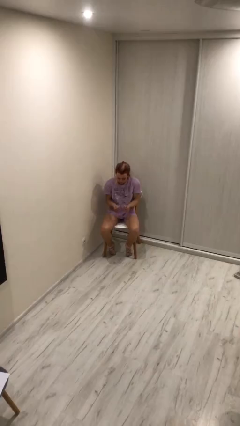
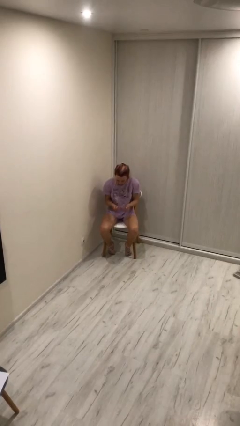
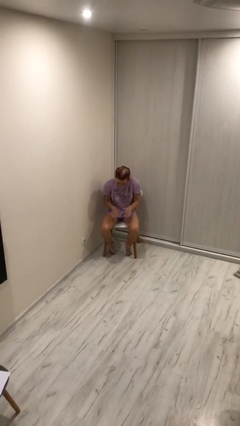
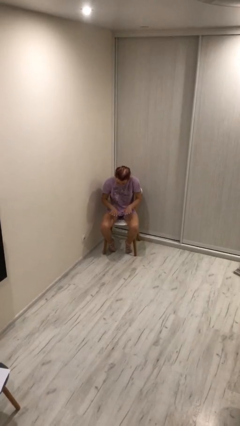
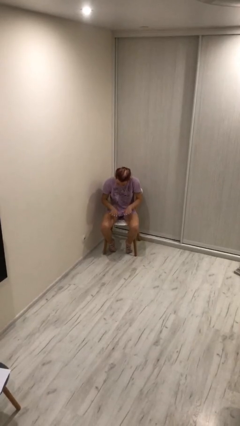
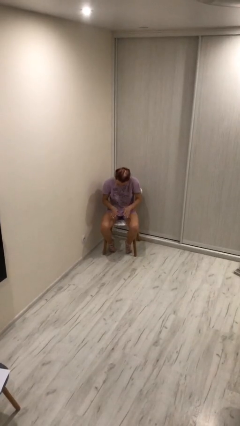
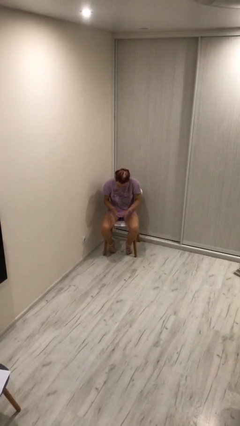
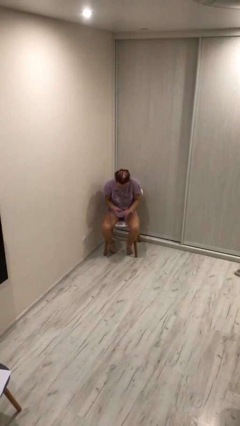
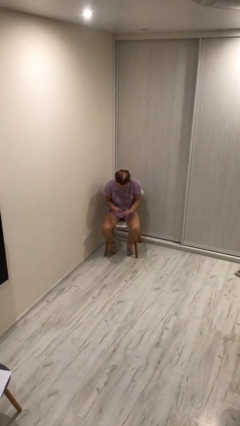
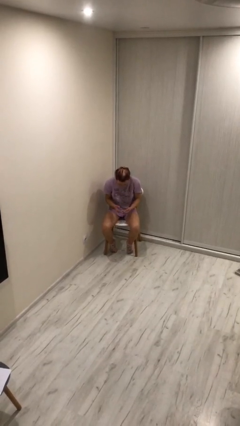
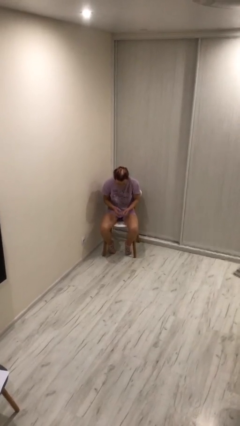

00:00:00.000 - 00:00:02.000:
person looks at hands in lap

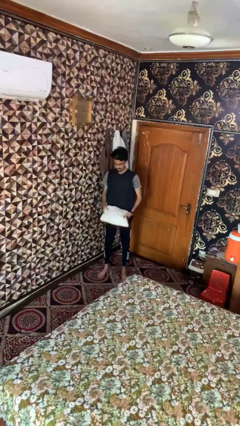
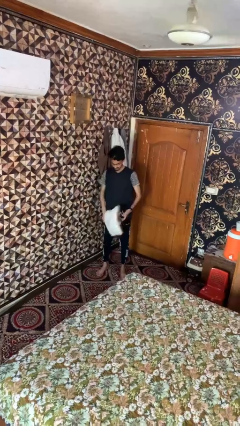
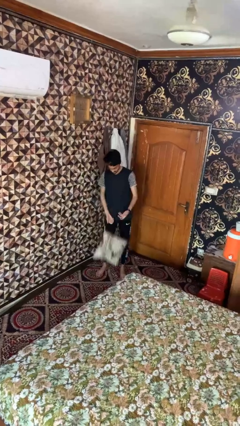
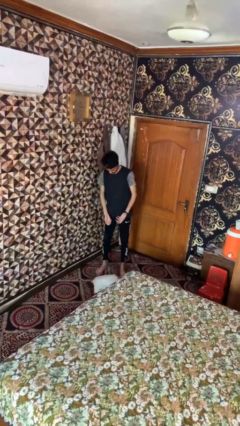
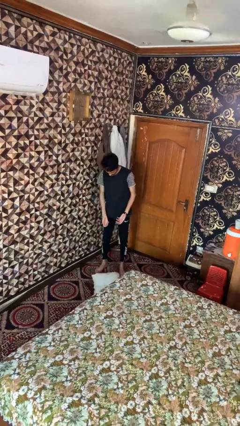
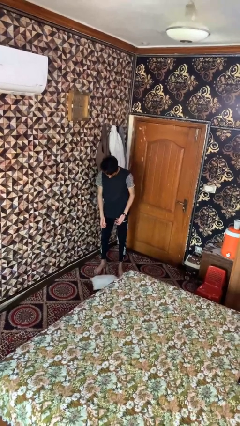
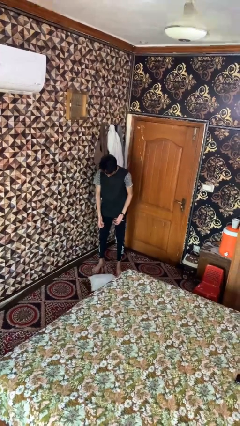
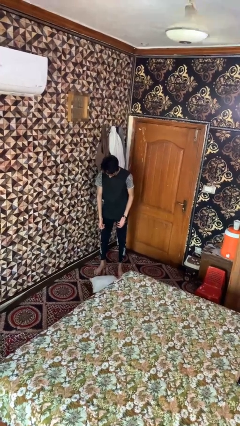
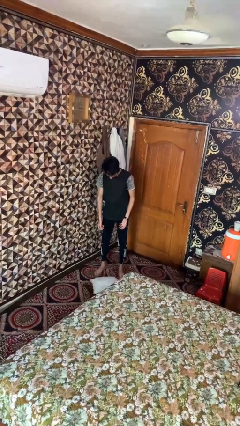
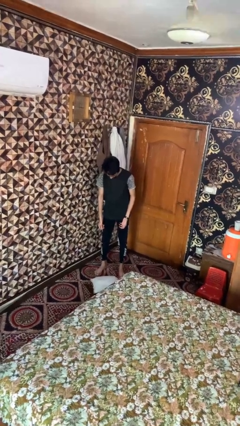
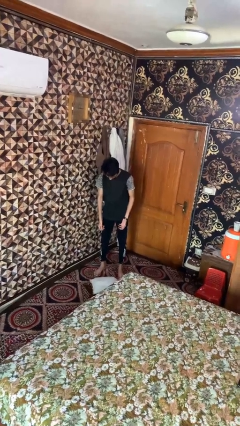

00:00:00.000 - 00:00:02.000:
person drops object

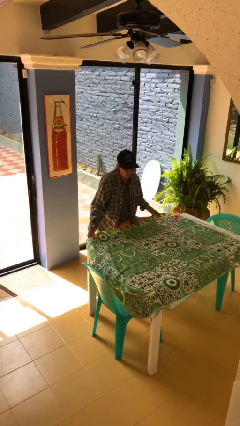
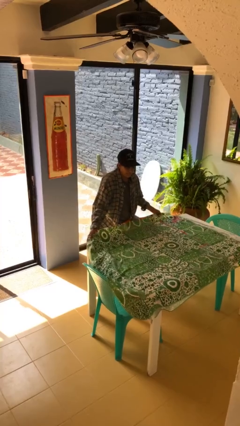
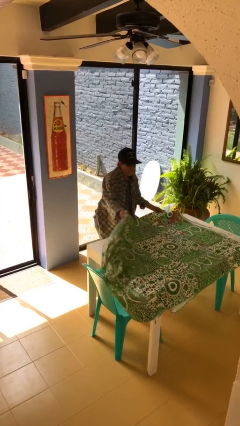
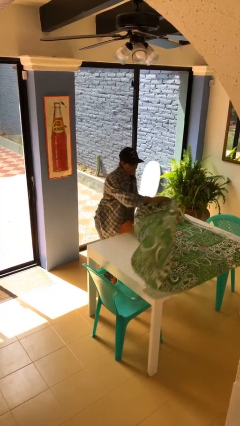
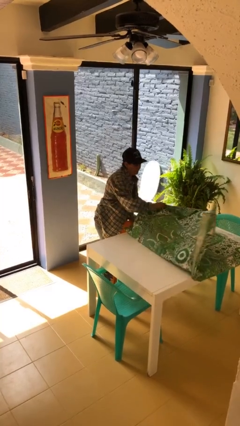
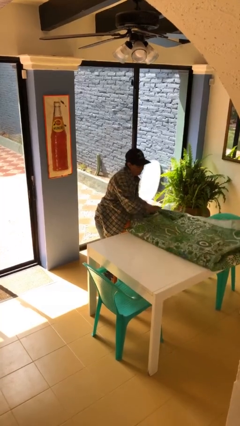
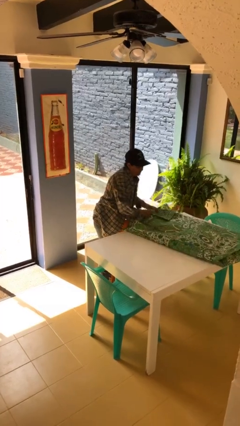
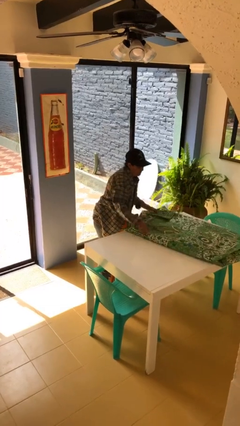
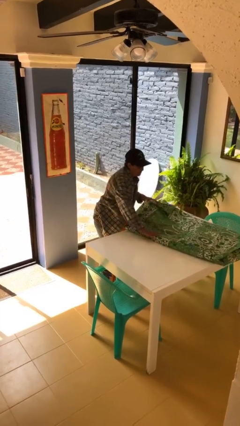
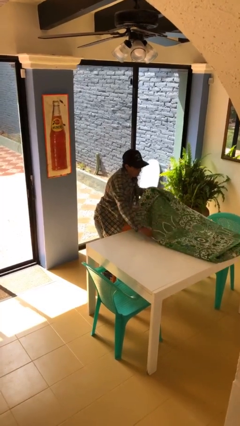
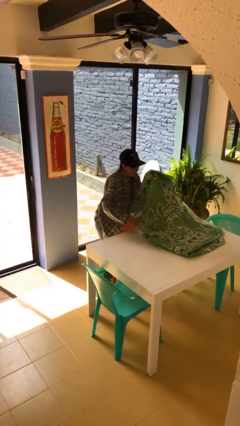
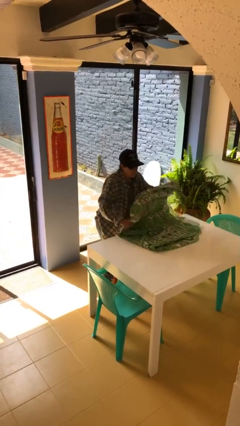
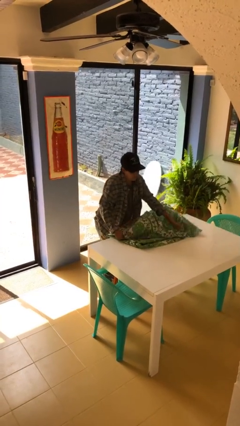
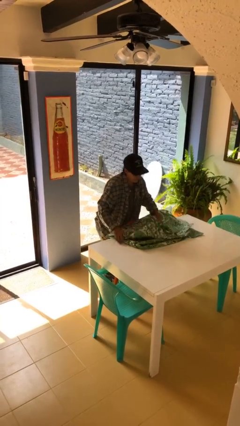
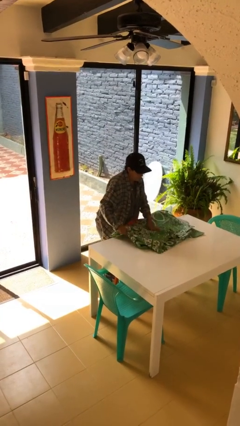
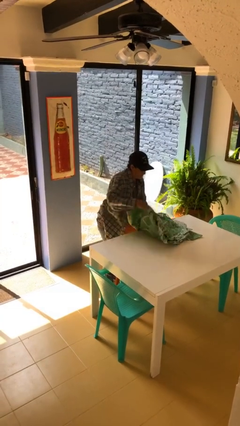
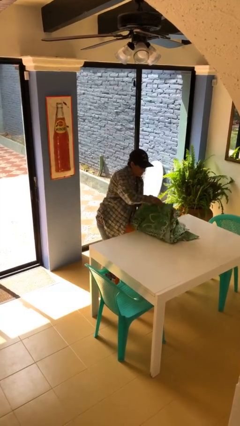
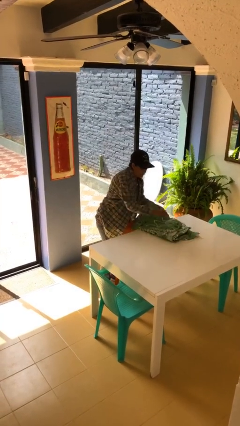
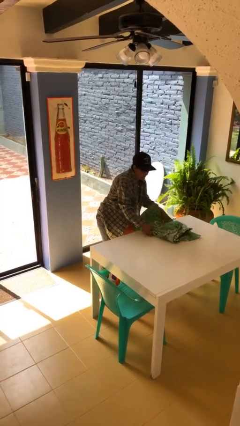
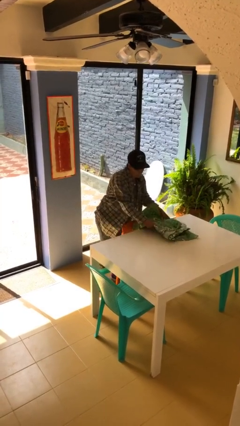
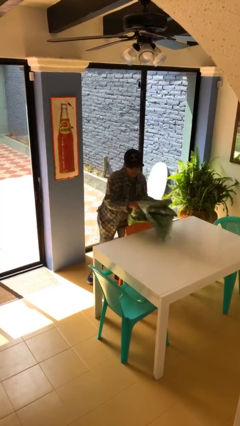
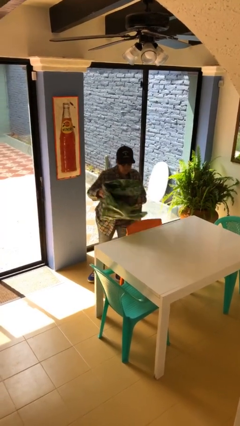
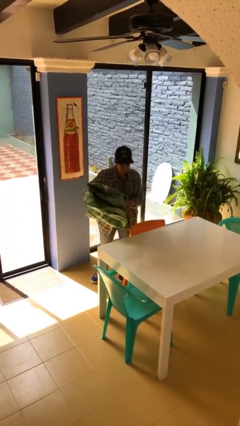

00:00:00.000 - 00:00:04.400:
person folds tablecloth

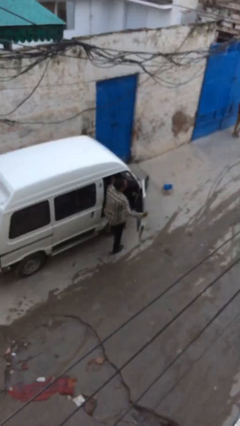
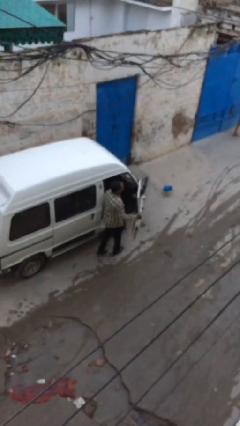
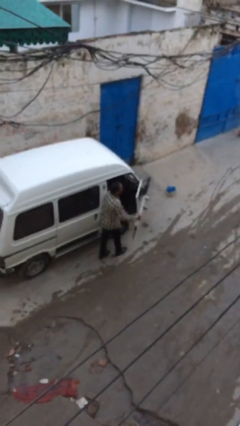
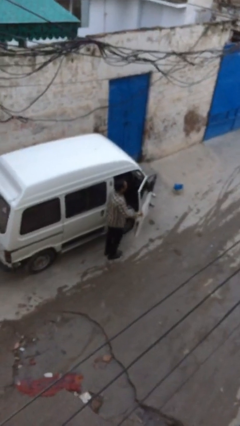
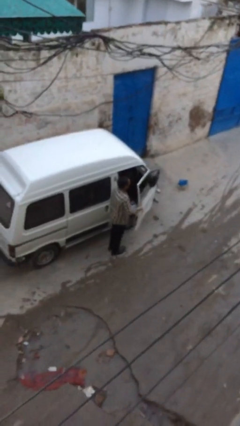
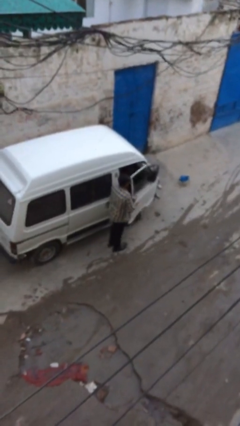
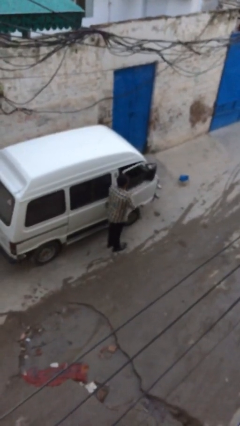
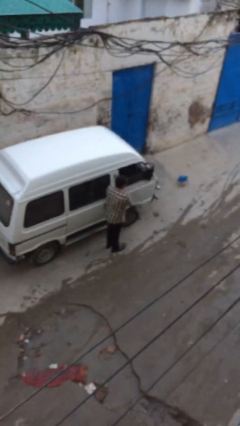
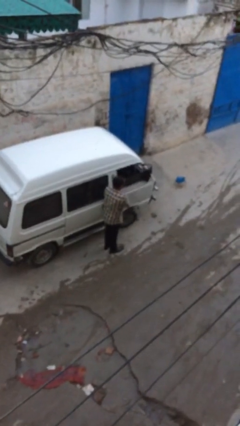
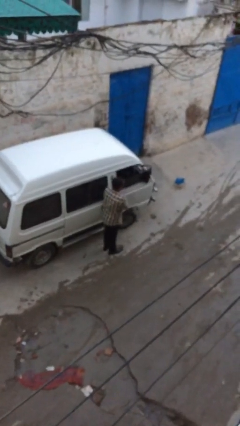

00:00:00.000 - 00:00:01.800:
person closes car door

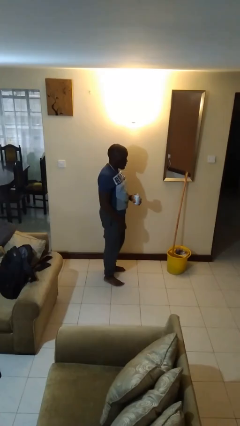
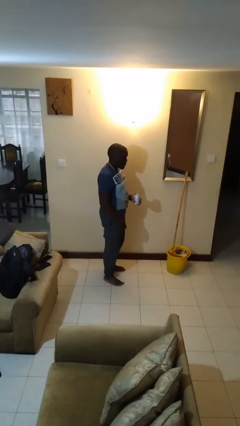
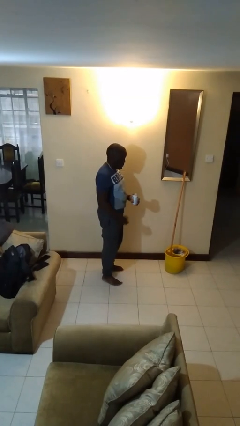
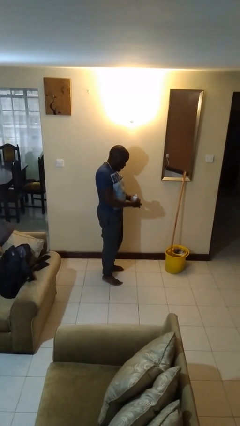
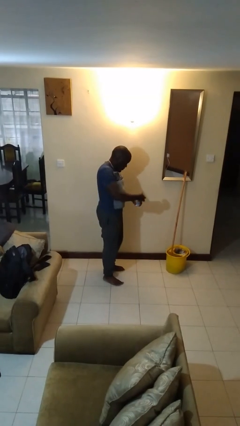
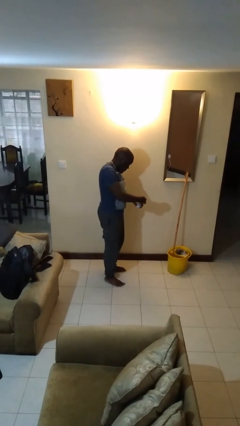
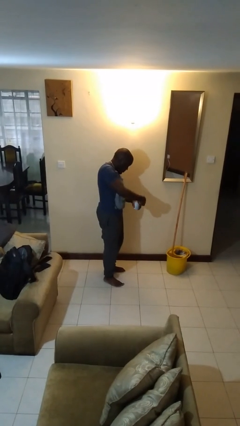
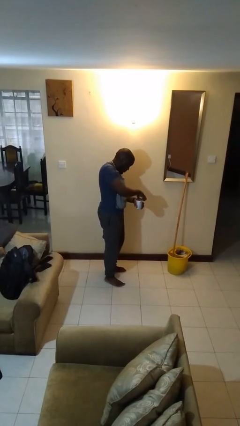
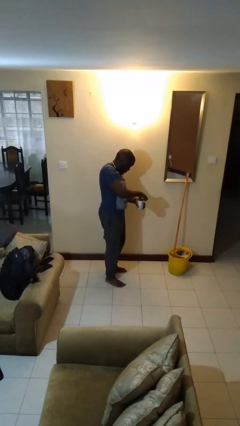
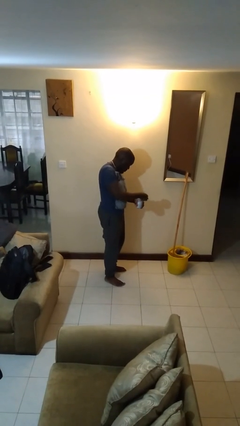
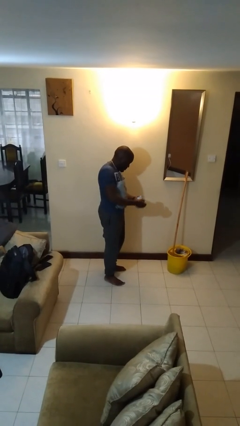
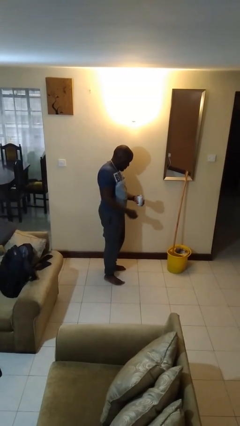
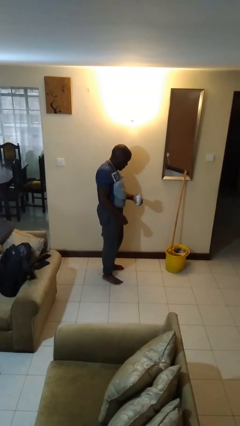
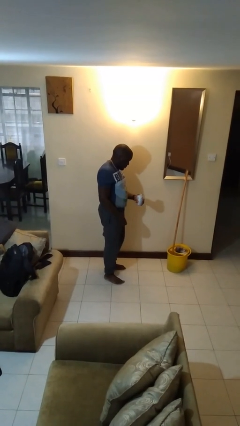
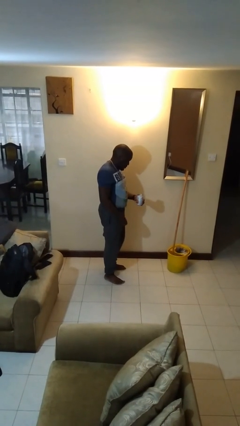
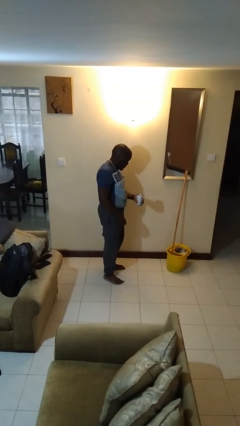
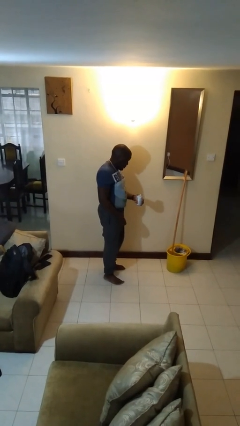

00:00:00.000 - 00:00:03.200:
person opens beverage can

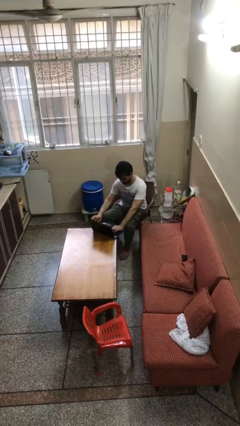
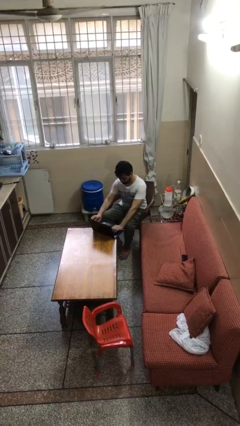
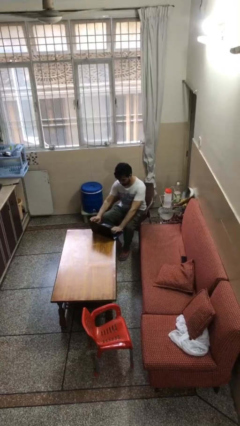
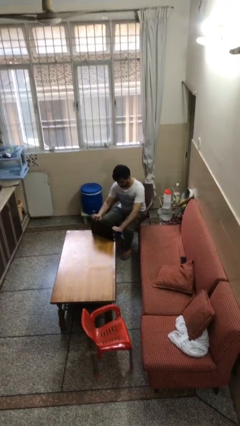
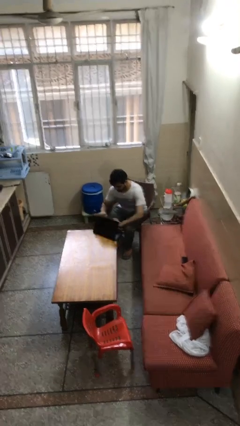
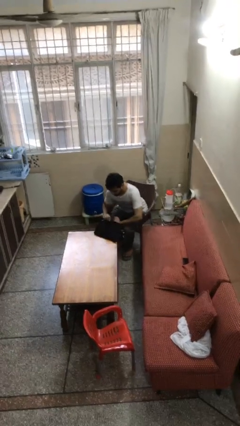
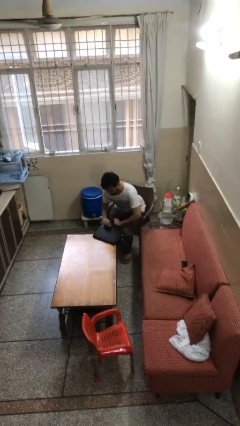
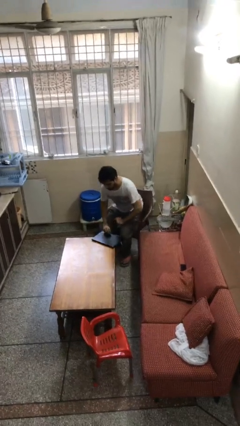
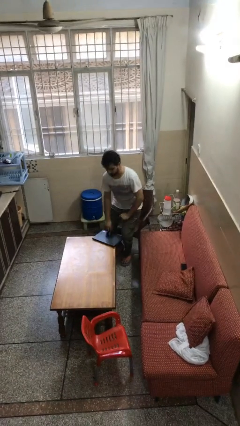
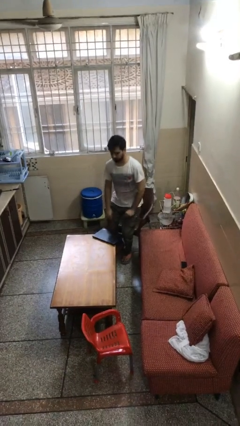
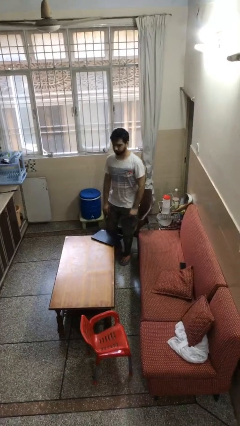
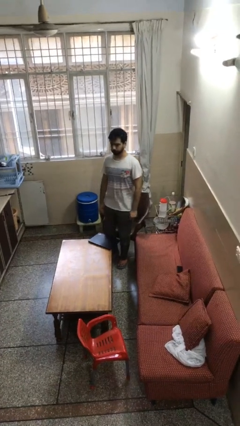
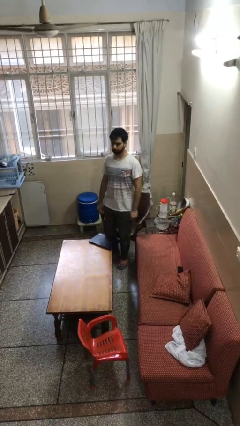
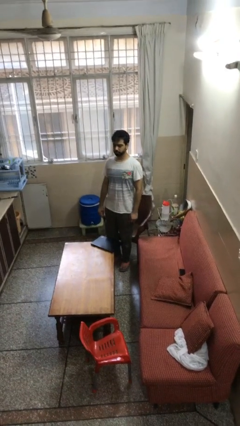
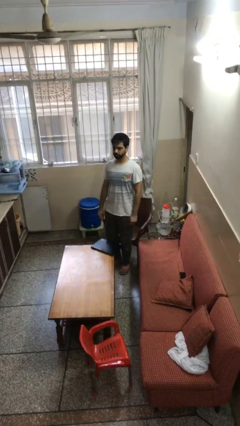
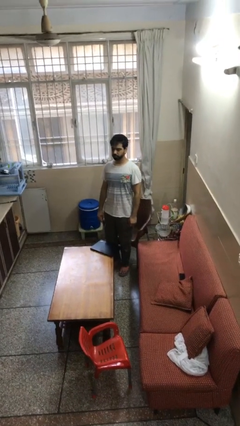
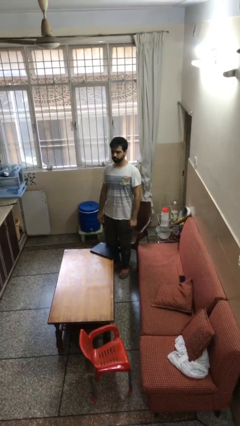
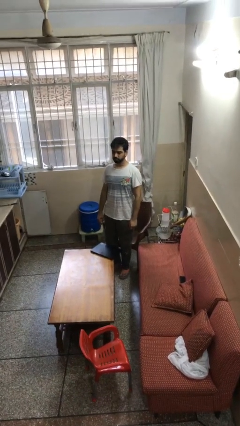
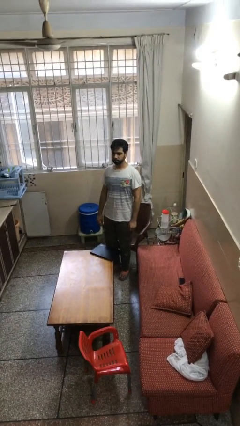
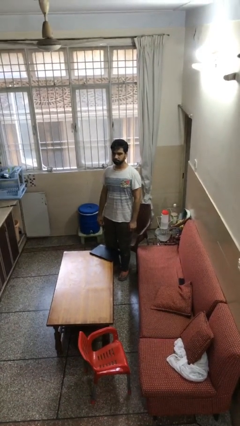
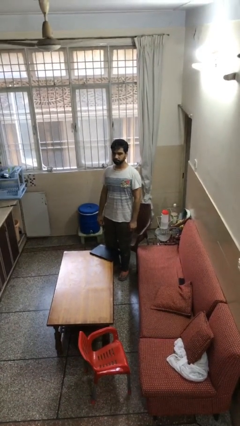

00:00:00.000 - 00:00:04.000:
person stands up
